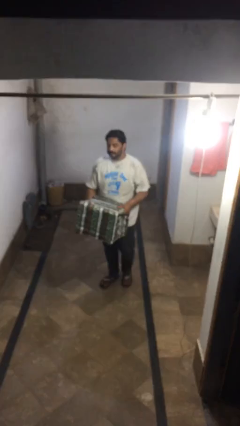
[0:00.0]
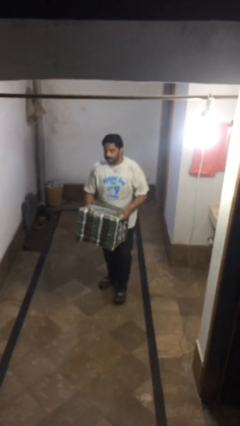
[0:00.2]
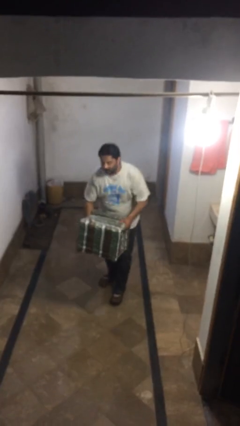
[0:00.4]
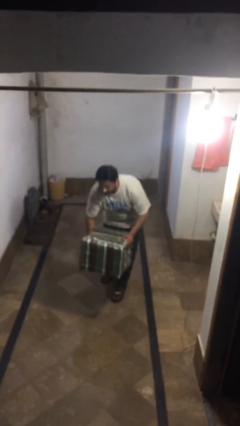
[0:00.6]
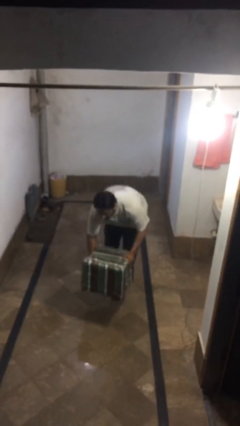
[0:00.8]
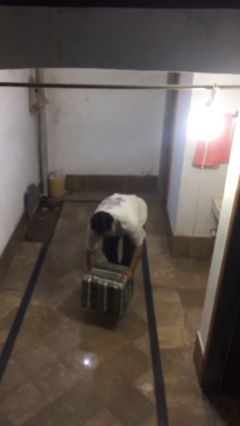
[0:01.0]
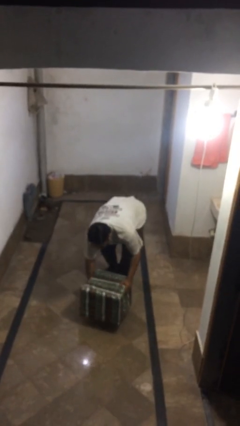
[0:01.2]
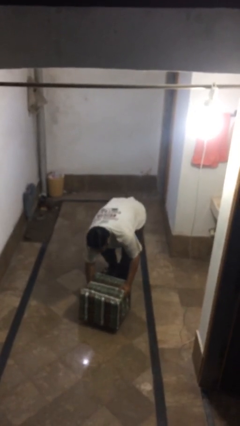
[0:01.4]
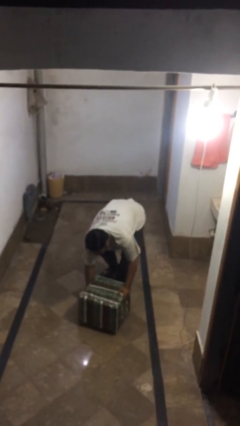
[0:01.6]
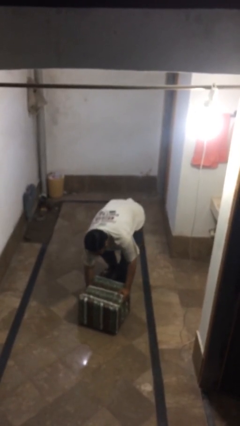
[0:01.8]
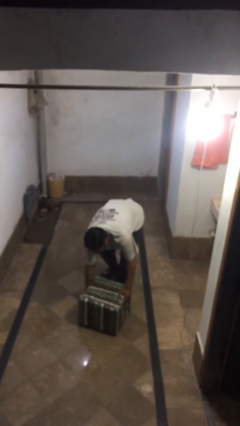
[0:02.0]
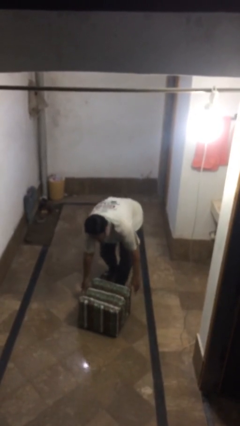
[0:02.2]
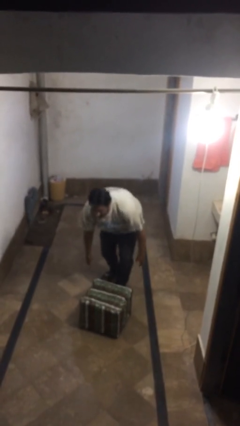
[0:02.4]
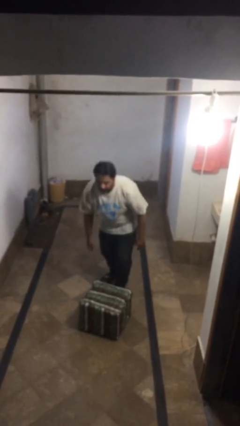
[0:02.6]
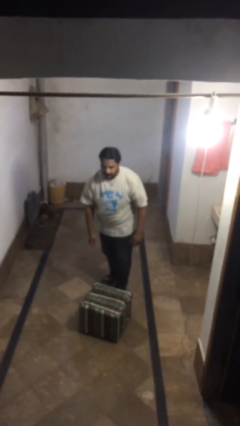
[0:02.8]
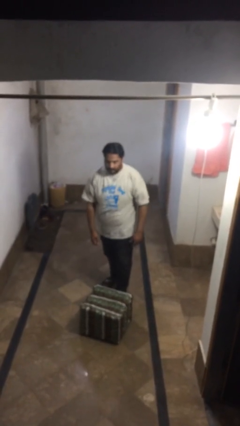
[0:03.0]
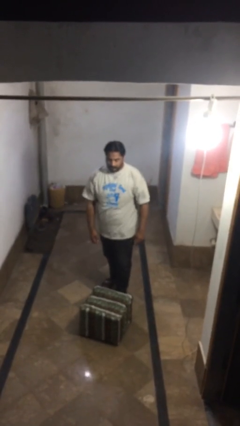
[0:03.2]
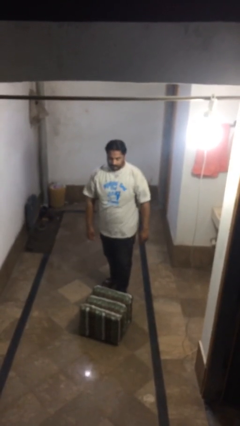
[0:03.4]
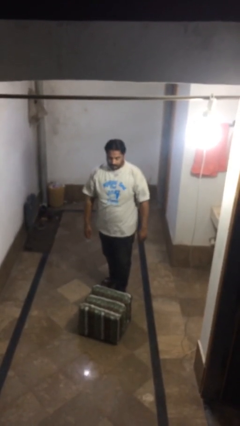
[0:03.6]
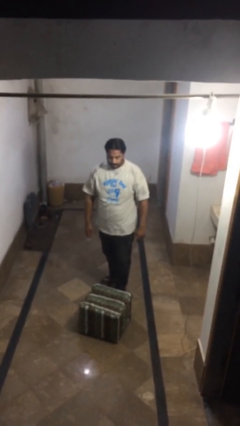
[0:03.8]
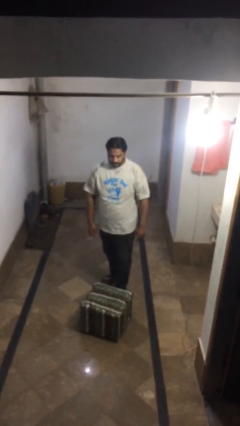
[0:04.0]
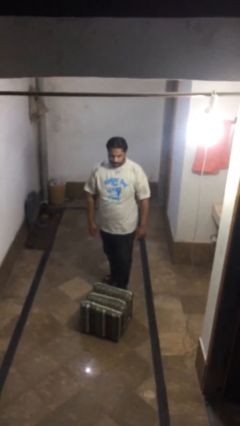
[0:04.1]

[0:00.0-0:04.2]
person puts down object on floor

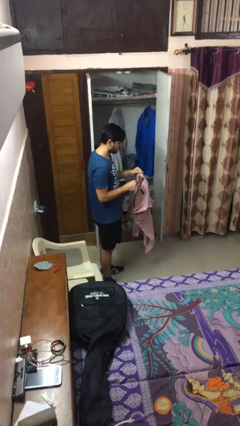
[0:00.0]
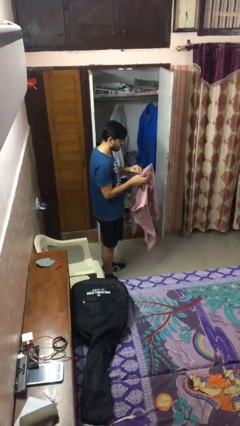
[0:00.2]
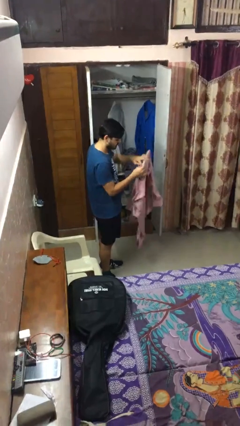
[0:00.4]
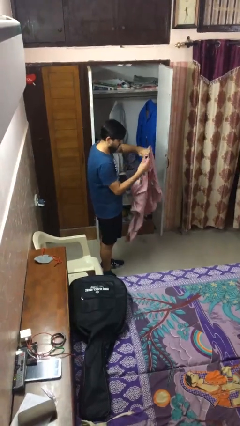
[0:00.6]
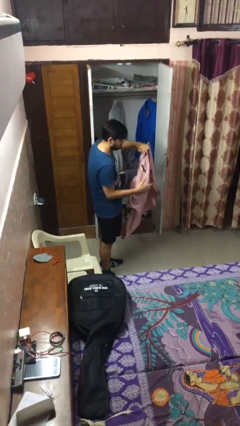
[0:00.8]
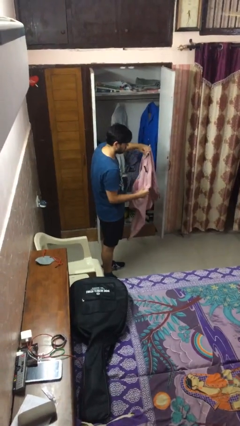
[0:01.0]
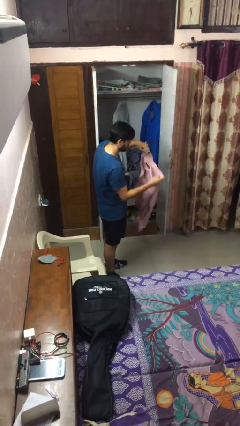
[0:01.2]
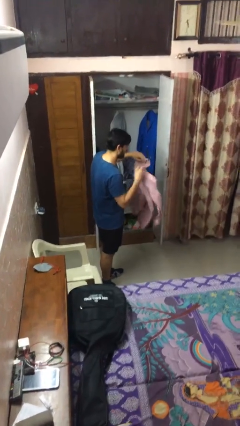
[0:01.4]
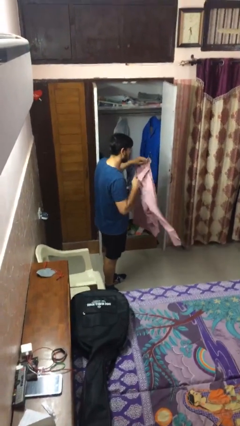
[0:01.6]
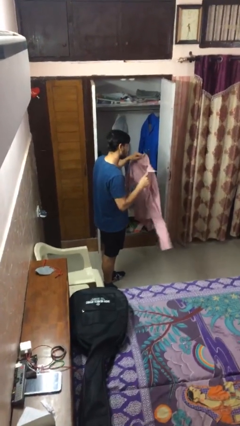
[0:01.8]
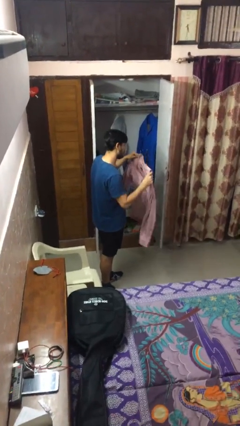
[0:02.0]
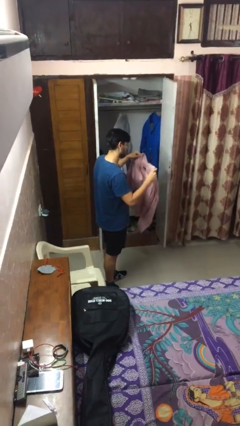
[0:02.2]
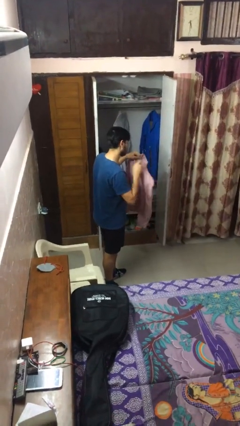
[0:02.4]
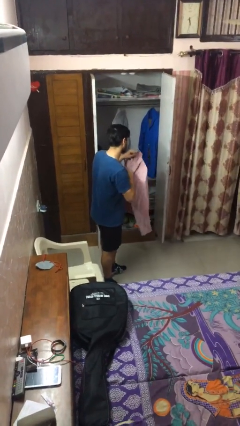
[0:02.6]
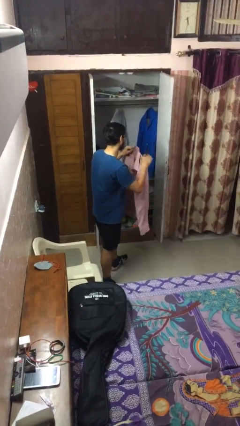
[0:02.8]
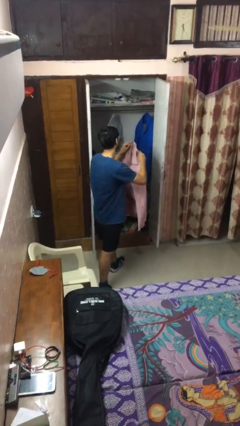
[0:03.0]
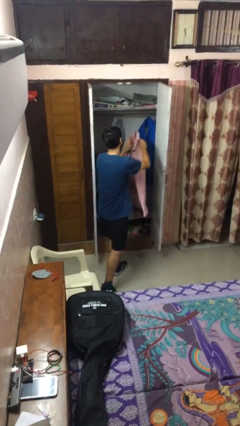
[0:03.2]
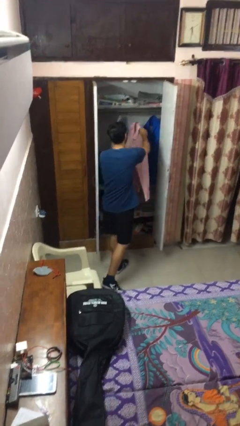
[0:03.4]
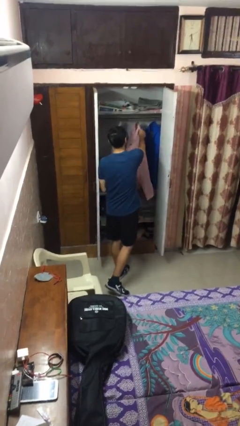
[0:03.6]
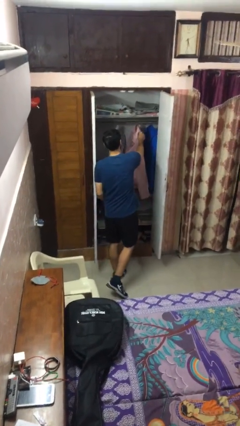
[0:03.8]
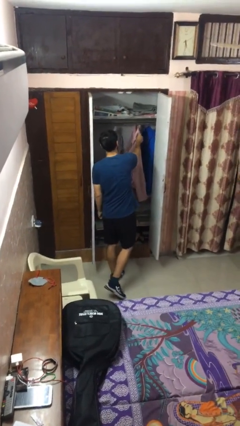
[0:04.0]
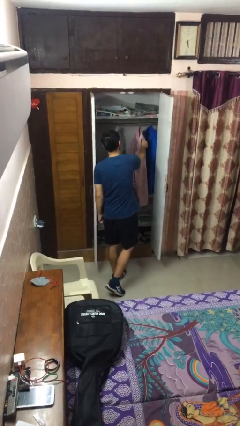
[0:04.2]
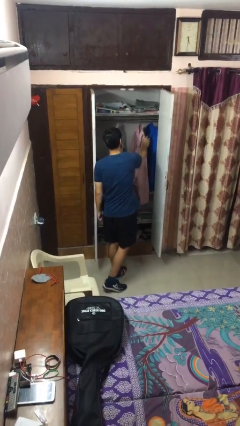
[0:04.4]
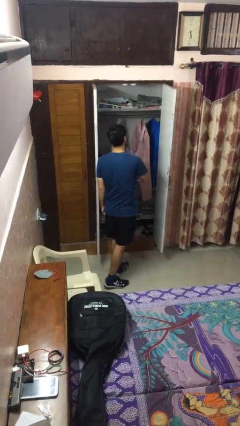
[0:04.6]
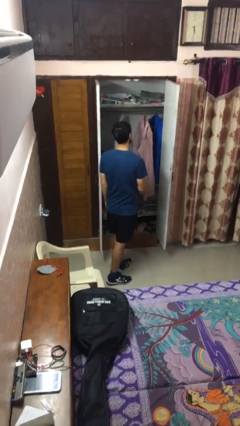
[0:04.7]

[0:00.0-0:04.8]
person puts clothes into closet

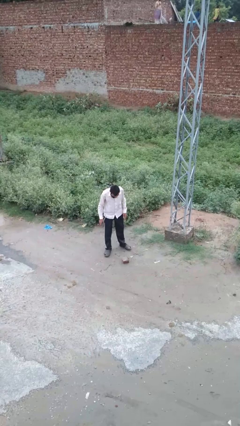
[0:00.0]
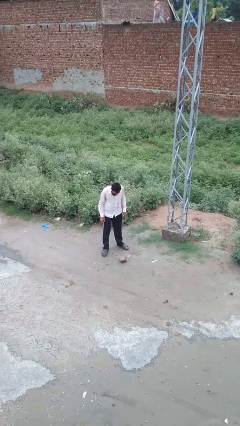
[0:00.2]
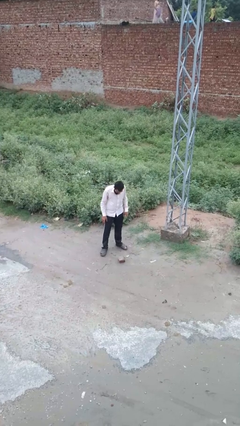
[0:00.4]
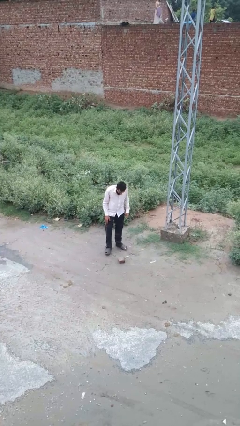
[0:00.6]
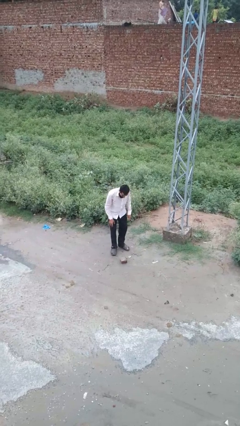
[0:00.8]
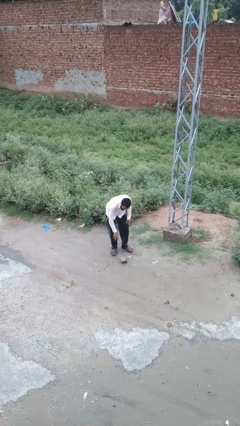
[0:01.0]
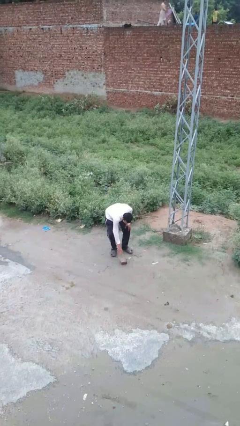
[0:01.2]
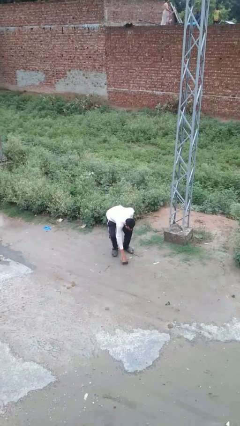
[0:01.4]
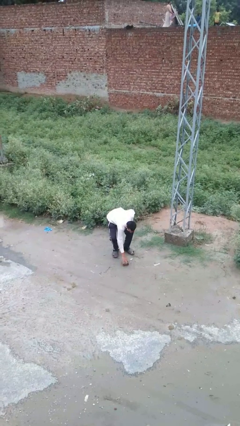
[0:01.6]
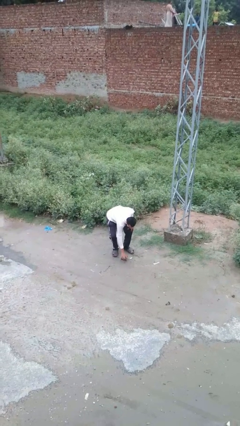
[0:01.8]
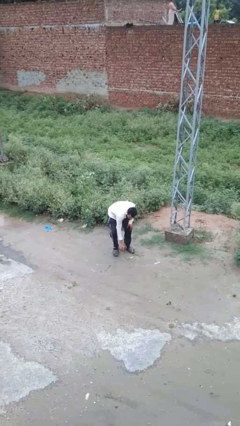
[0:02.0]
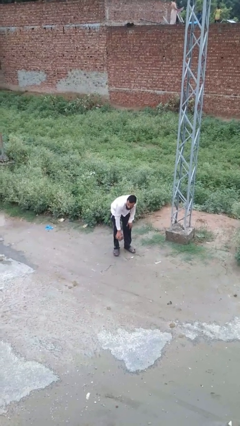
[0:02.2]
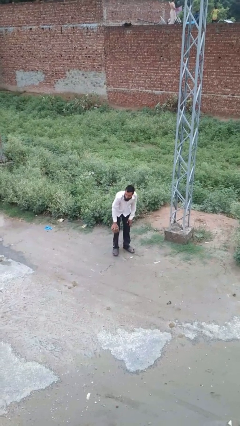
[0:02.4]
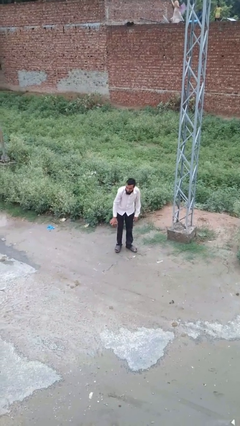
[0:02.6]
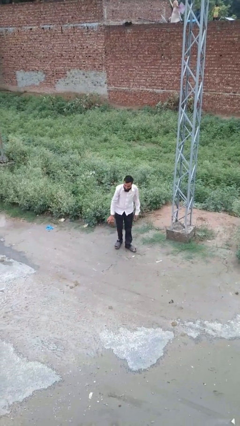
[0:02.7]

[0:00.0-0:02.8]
person picks up object from floor

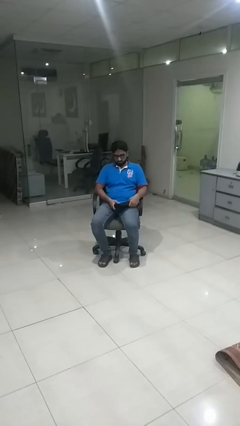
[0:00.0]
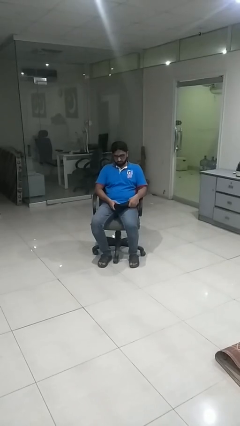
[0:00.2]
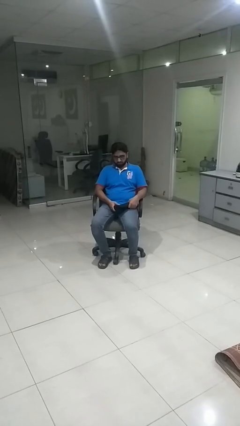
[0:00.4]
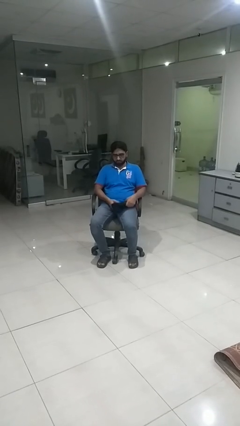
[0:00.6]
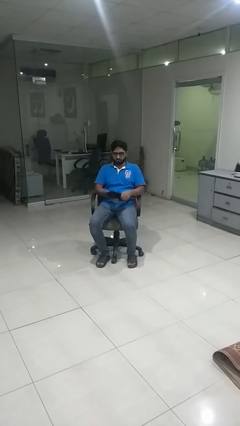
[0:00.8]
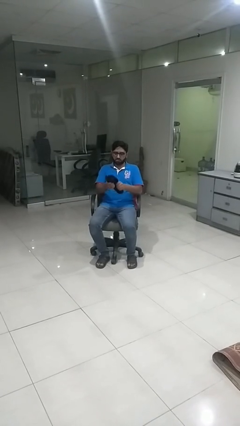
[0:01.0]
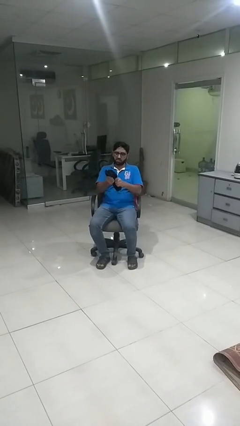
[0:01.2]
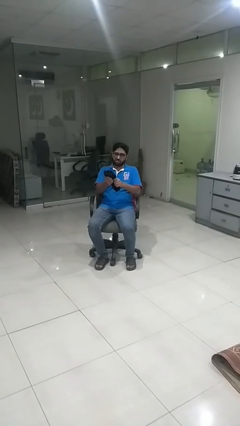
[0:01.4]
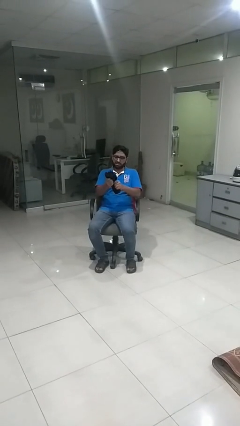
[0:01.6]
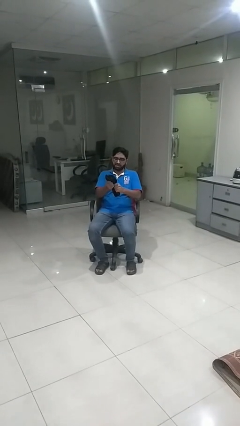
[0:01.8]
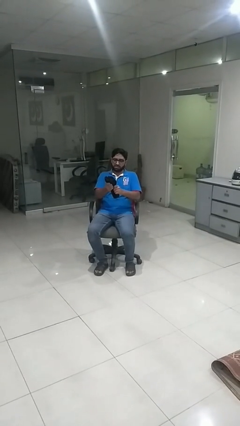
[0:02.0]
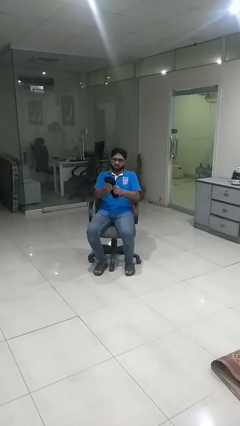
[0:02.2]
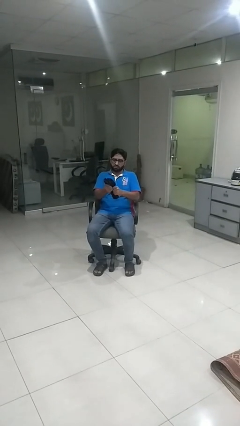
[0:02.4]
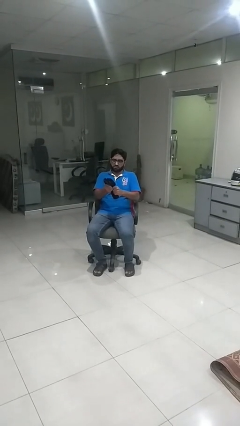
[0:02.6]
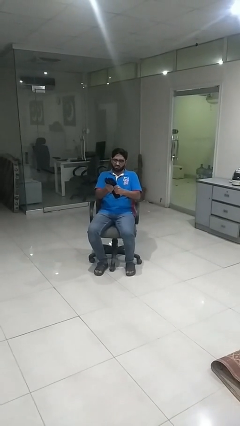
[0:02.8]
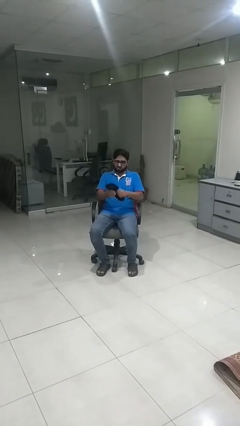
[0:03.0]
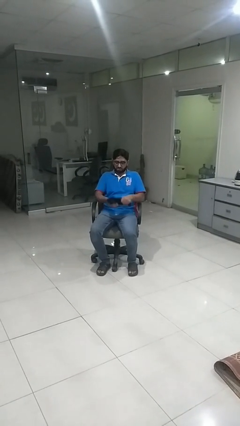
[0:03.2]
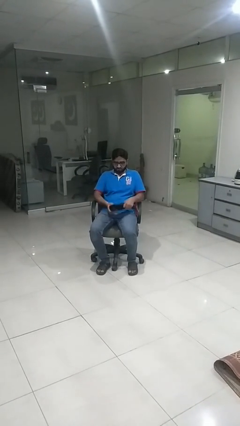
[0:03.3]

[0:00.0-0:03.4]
person squeezes object

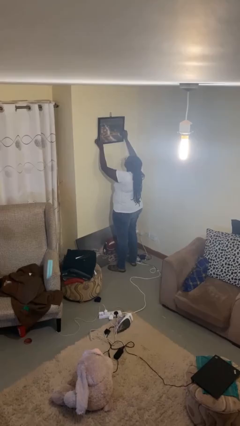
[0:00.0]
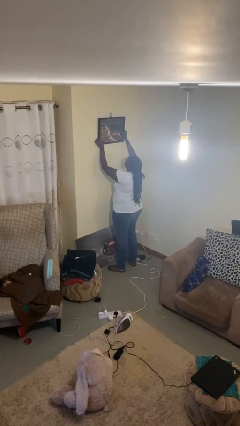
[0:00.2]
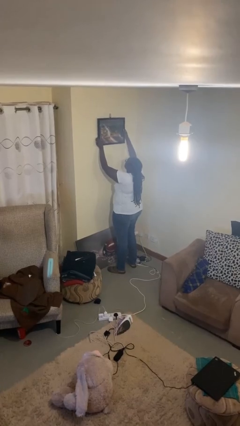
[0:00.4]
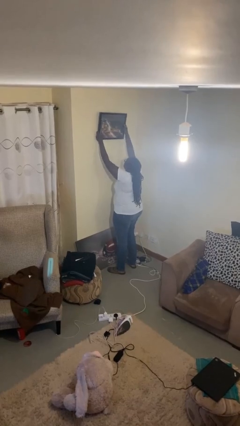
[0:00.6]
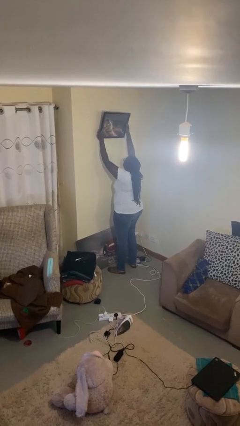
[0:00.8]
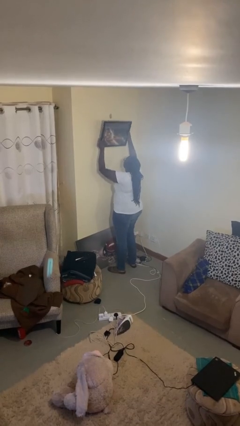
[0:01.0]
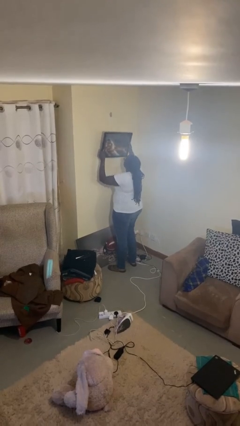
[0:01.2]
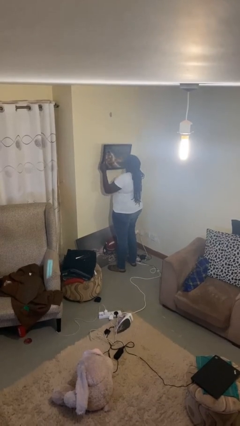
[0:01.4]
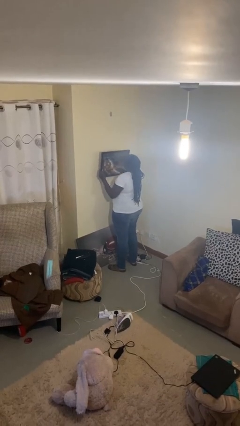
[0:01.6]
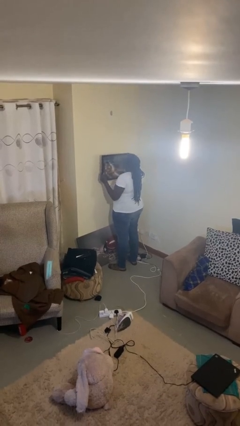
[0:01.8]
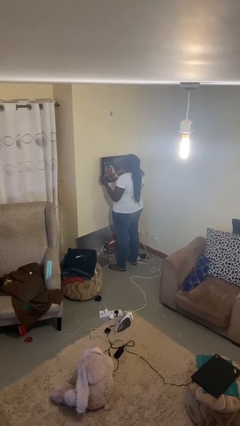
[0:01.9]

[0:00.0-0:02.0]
person takes down picture frame

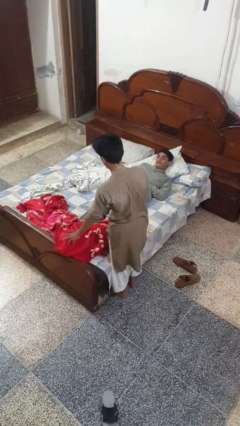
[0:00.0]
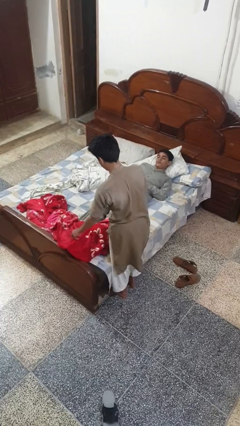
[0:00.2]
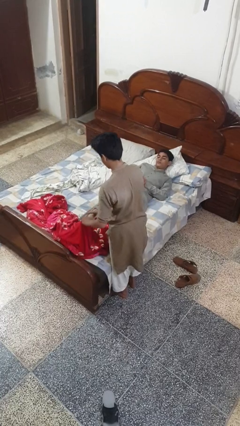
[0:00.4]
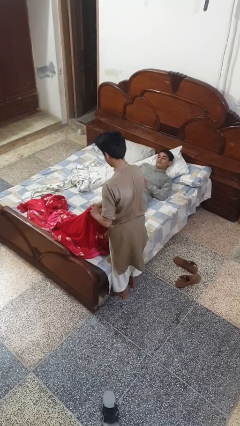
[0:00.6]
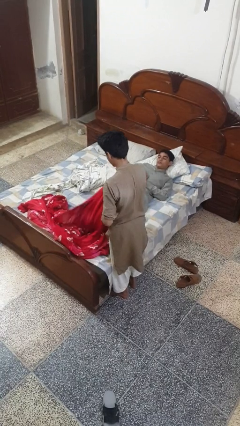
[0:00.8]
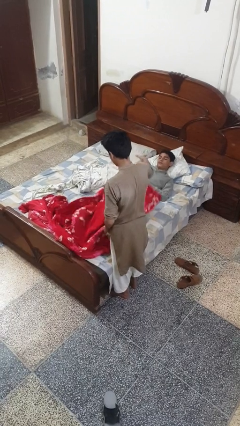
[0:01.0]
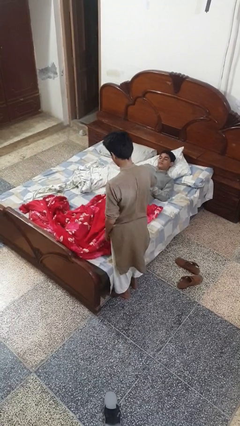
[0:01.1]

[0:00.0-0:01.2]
person covers friend with blanket
